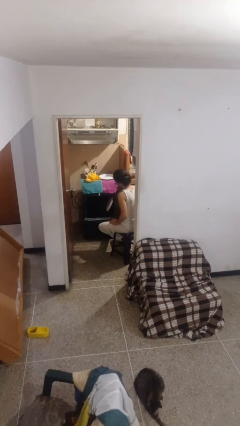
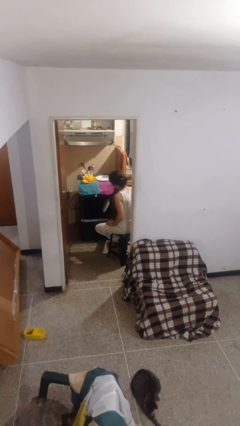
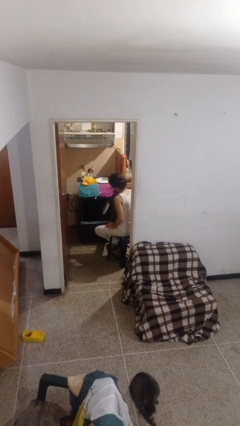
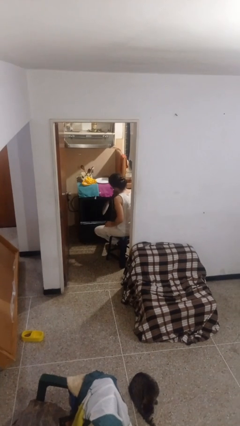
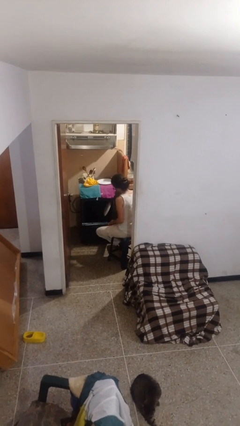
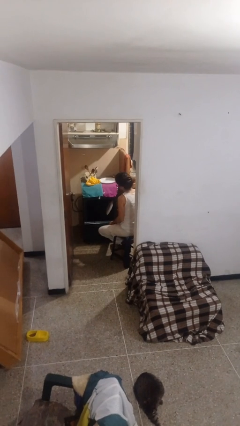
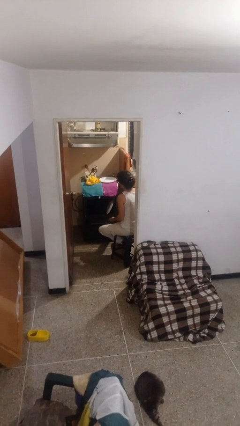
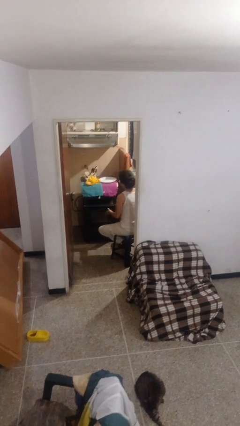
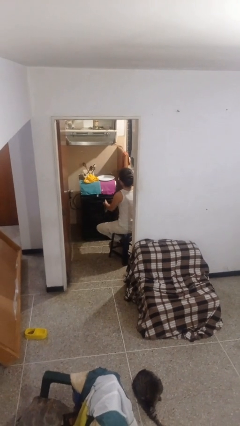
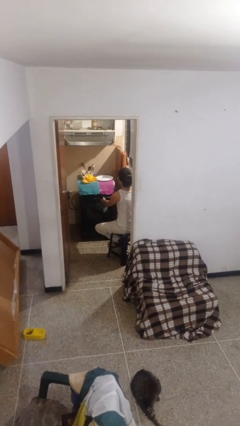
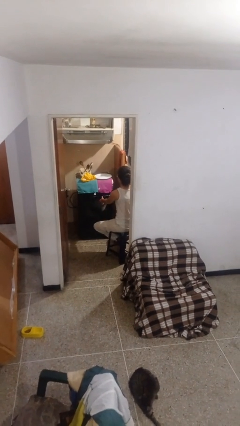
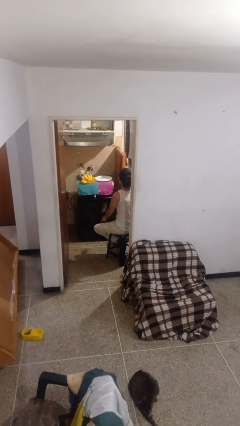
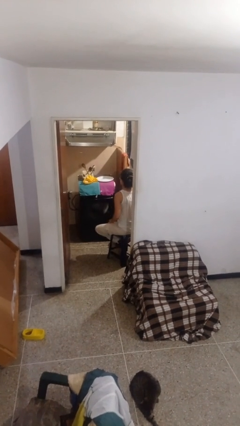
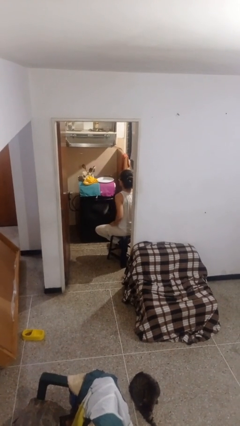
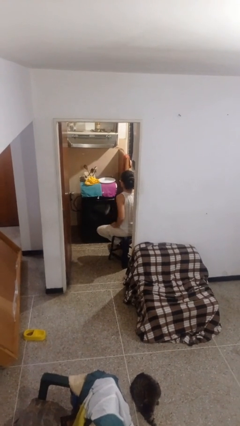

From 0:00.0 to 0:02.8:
person closes dishwasher

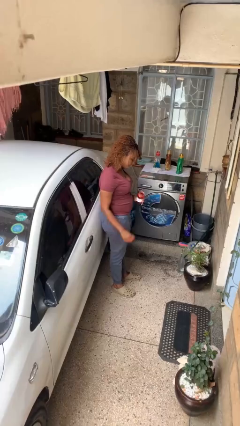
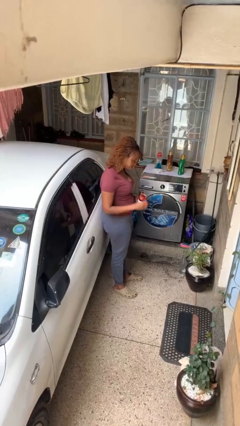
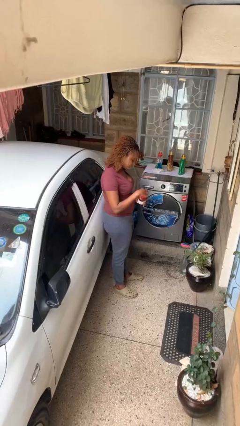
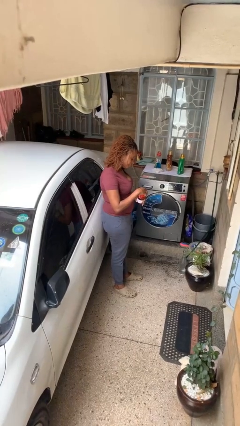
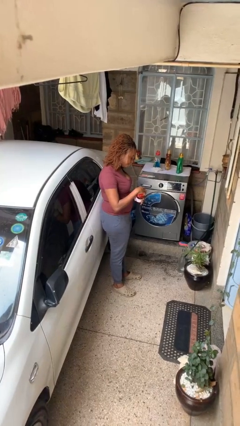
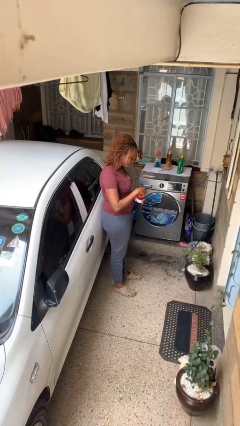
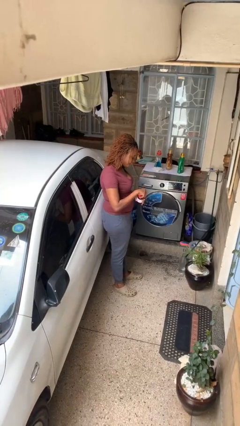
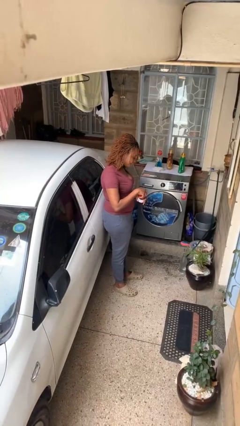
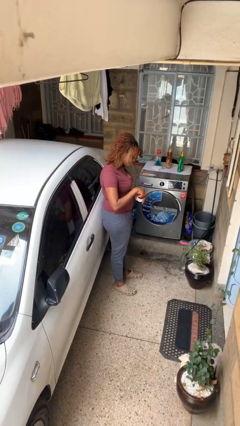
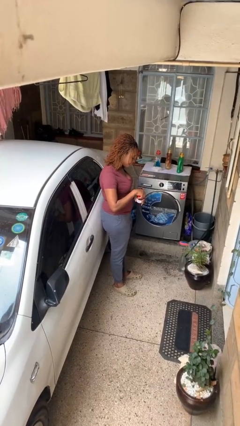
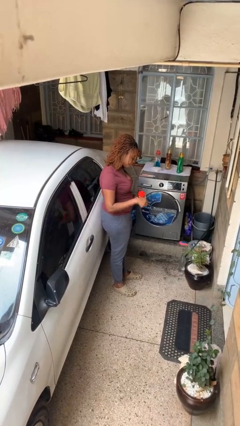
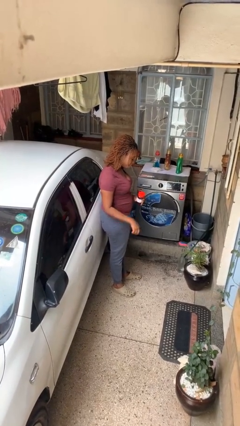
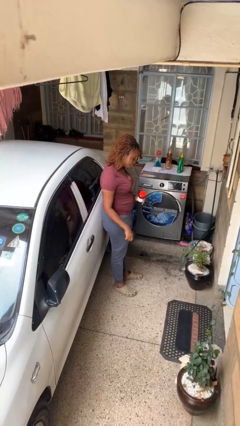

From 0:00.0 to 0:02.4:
person closes jar

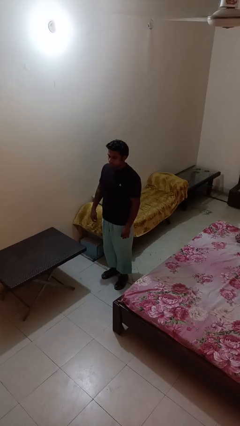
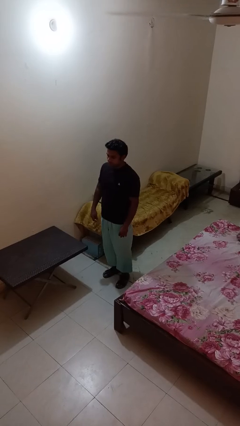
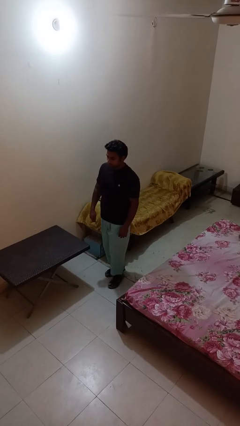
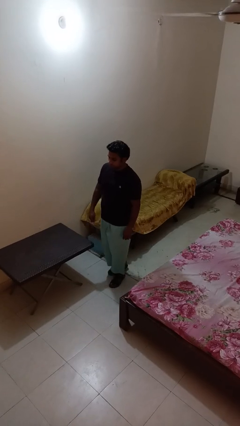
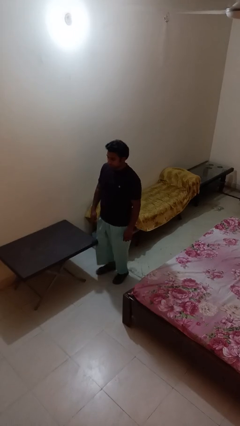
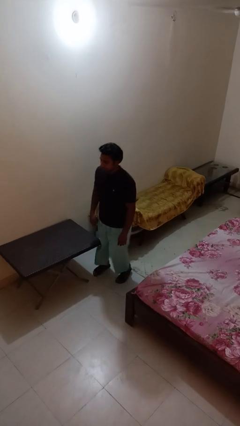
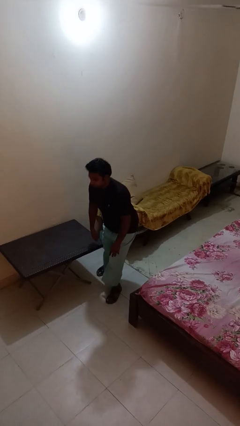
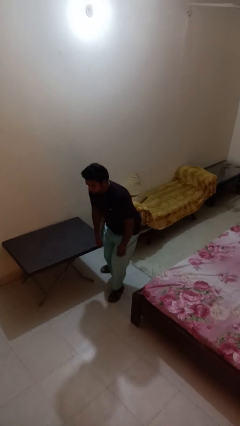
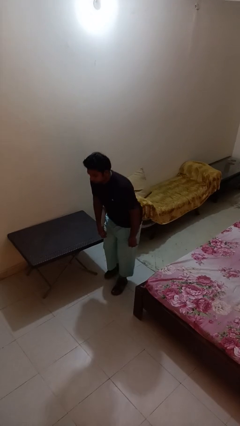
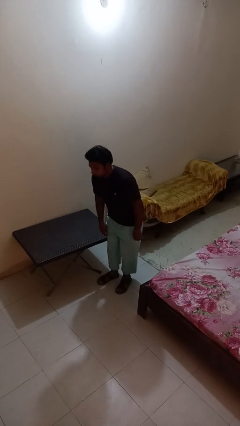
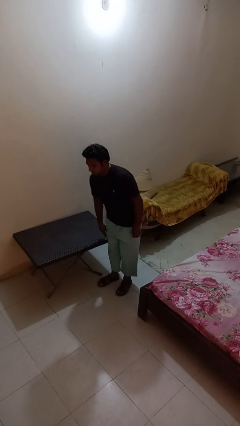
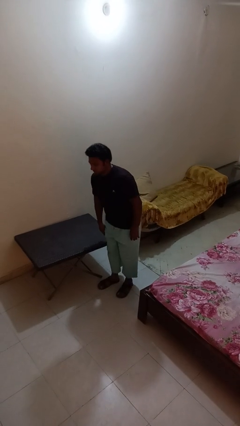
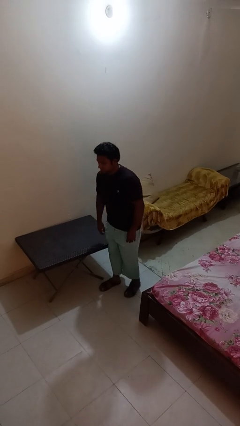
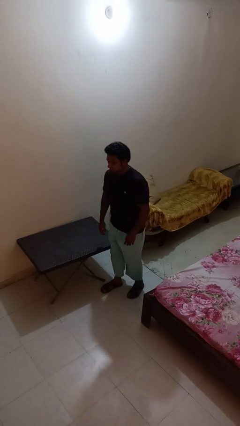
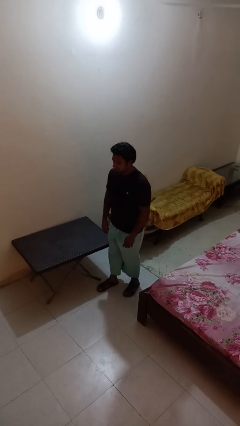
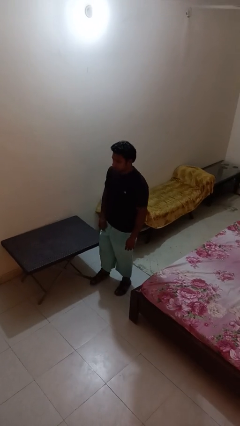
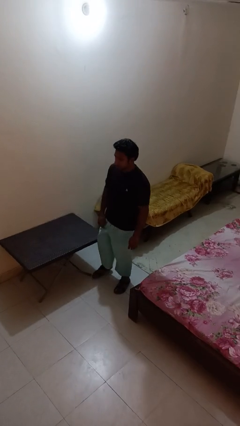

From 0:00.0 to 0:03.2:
person bumps into table

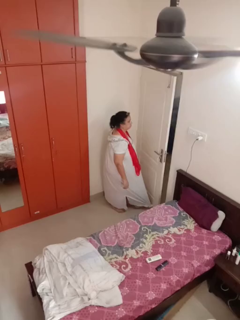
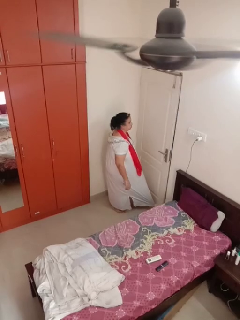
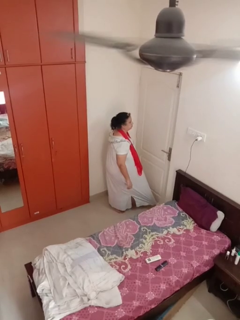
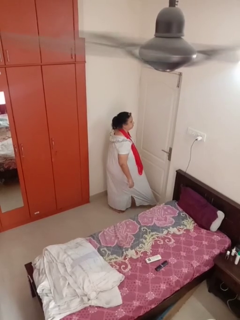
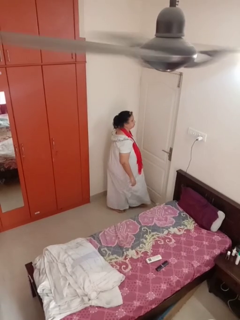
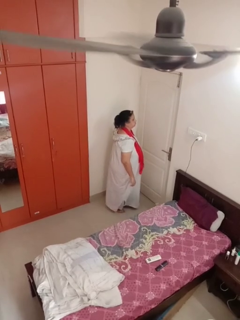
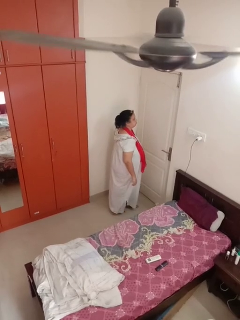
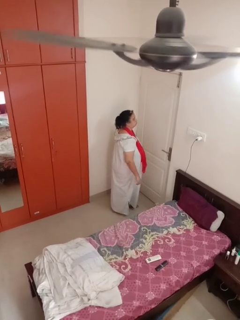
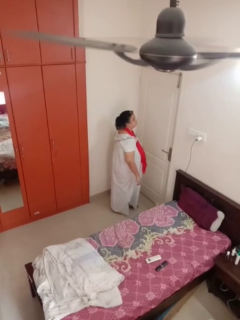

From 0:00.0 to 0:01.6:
person closes door with foot

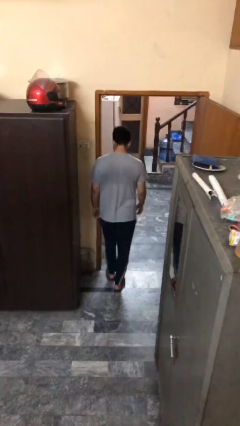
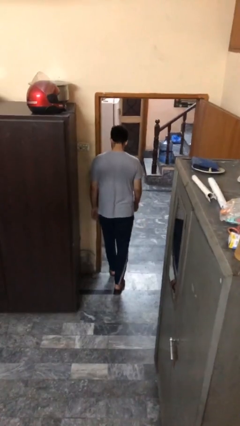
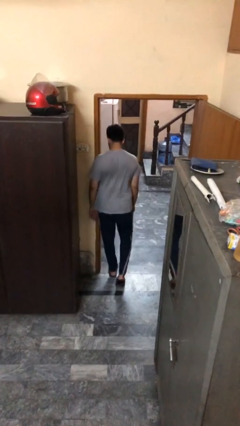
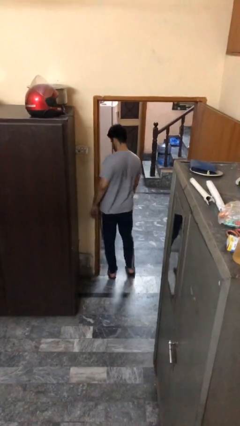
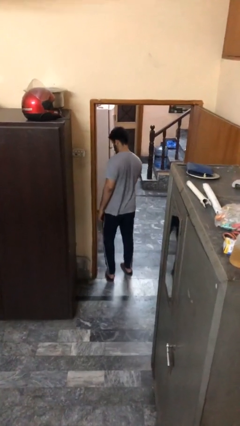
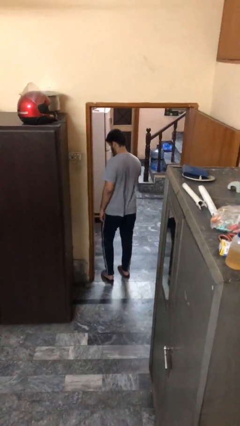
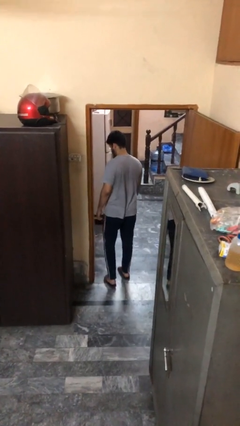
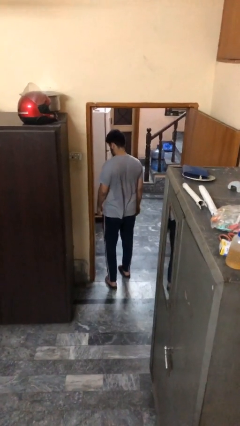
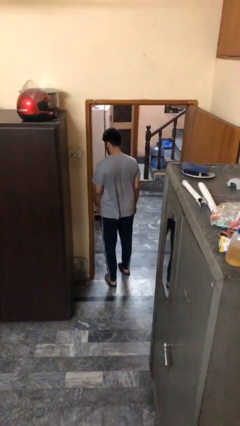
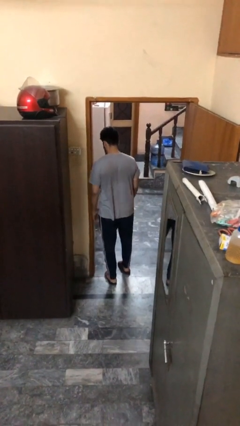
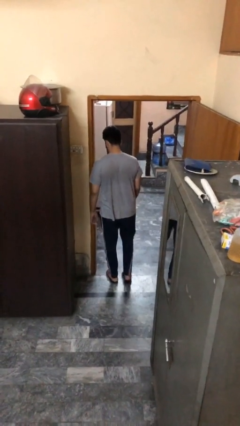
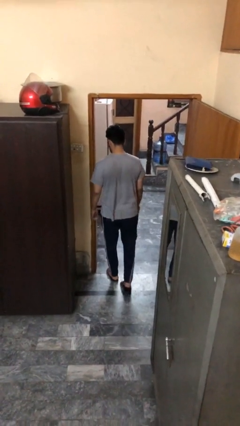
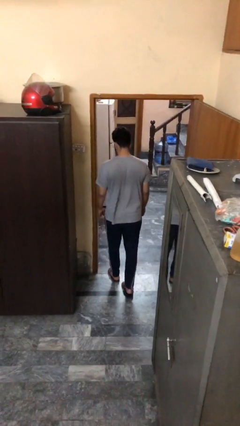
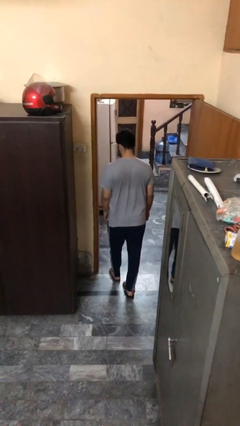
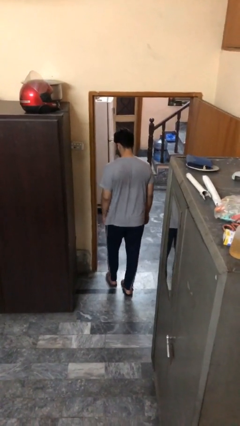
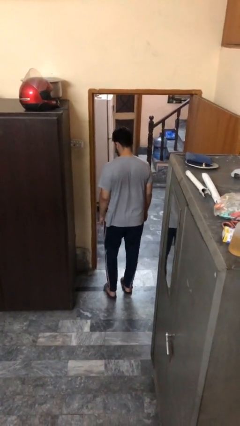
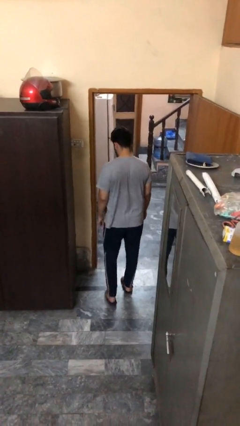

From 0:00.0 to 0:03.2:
person bumps into wall

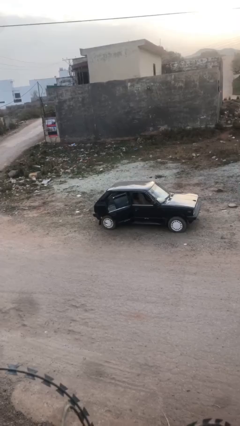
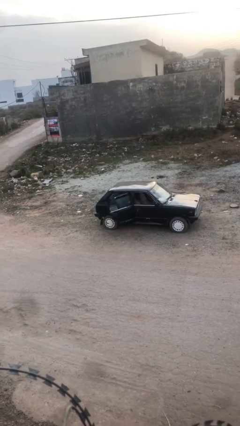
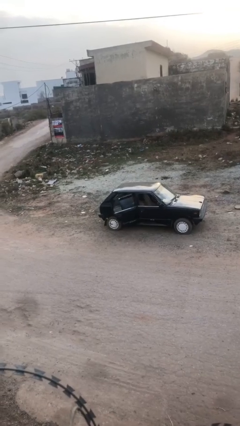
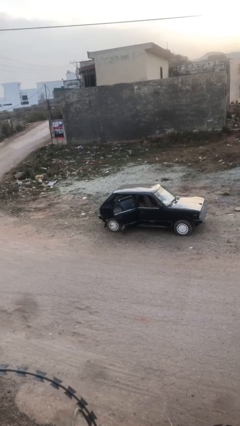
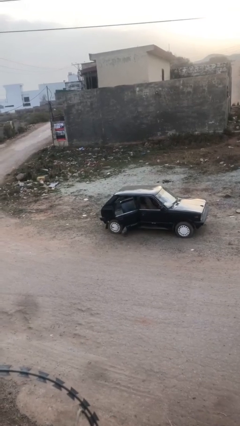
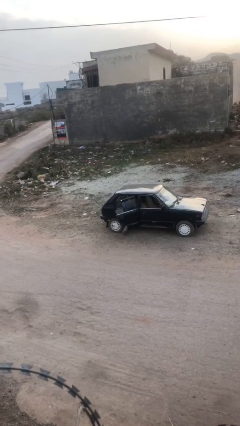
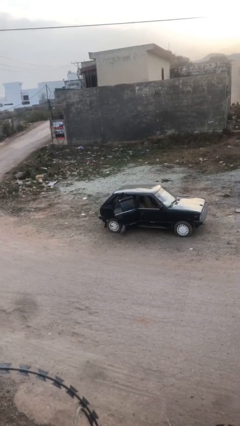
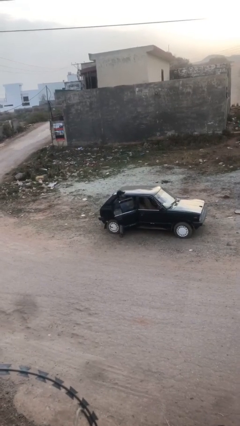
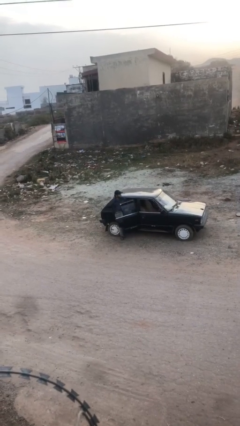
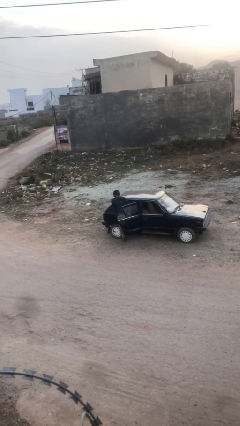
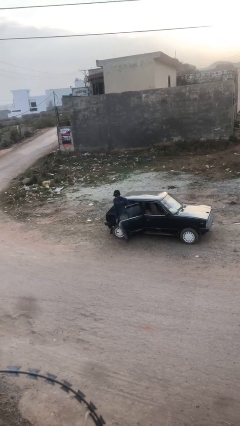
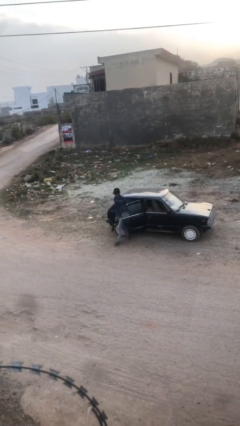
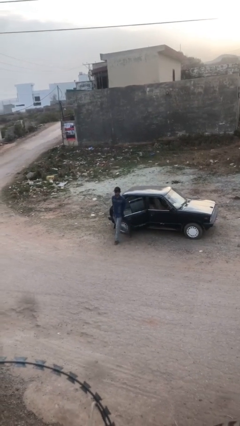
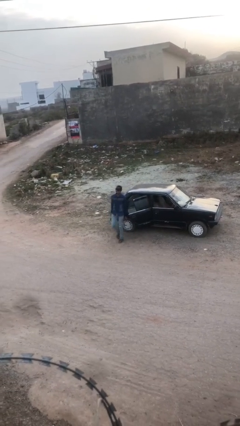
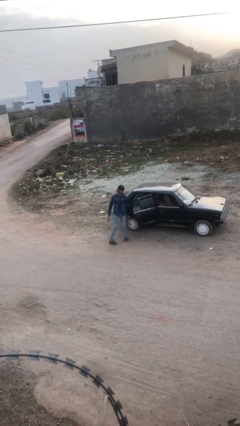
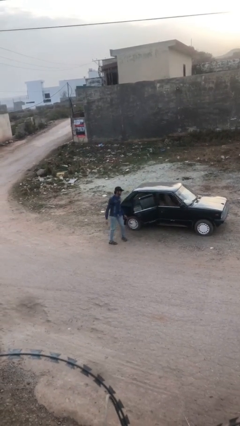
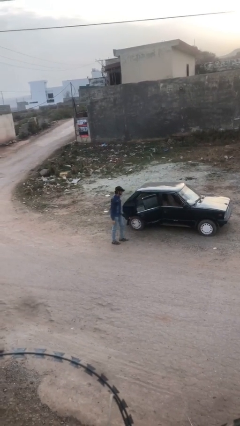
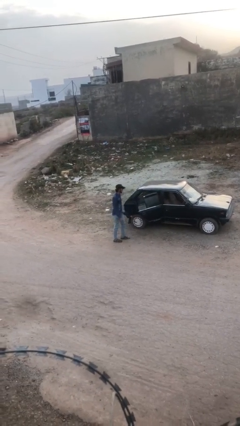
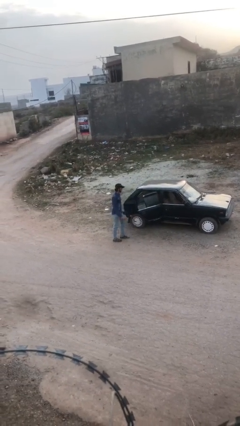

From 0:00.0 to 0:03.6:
person exits car

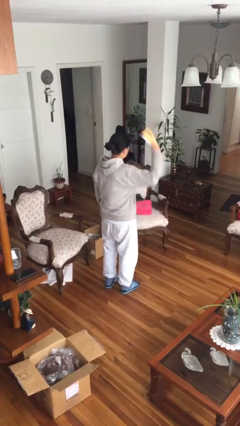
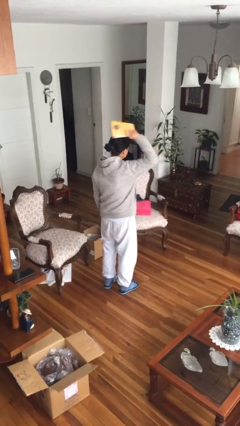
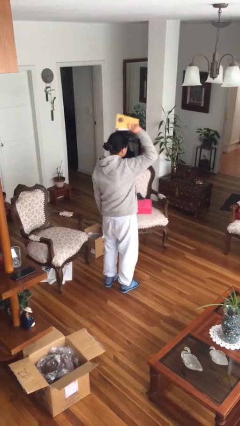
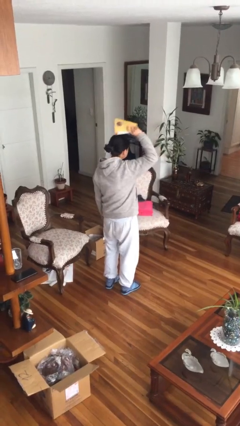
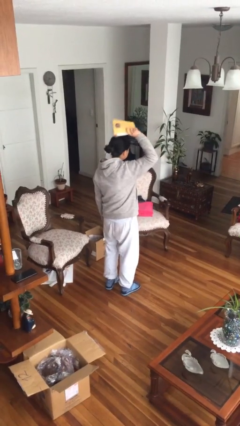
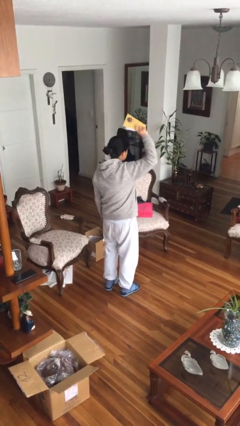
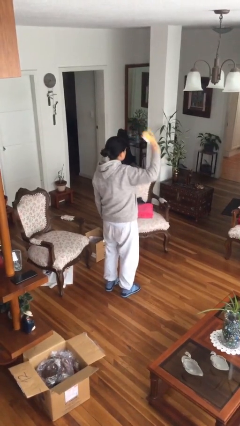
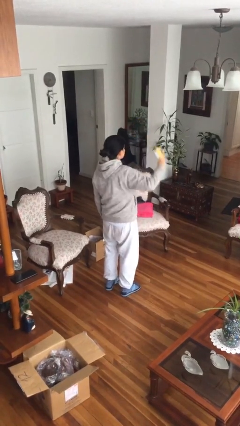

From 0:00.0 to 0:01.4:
person holds object above head

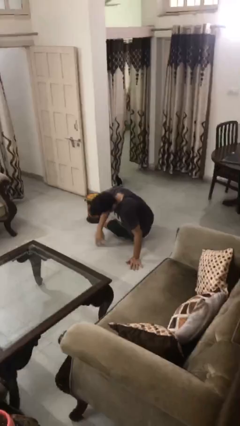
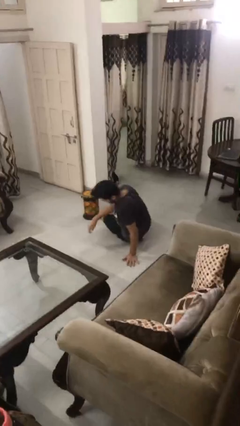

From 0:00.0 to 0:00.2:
person lies down on floor
